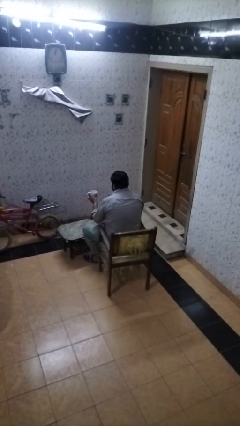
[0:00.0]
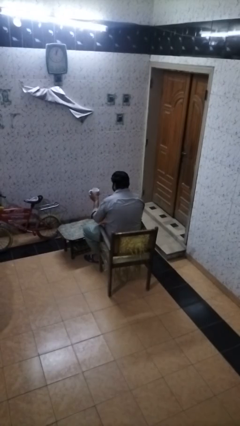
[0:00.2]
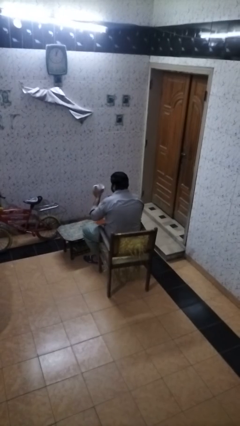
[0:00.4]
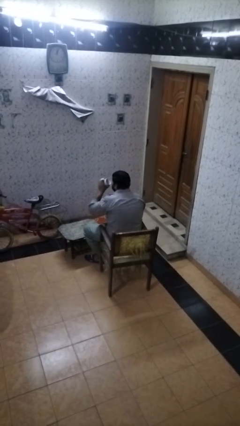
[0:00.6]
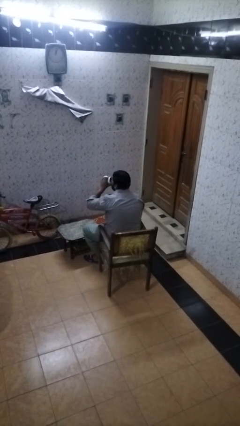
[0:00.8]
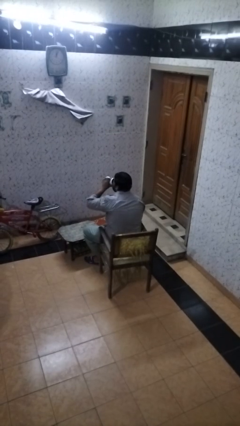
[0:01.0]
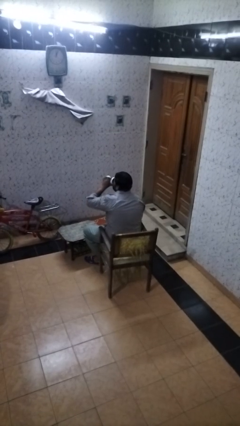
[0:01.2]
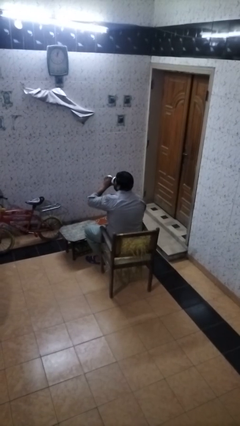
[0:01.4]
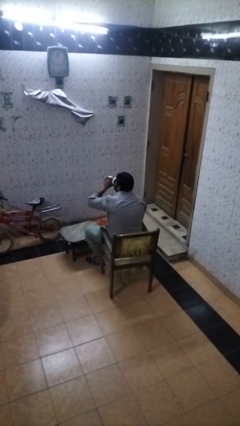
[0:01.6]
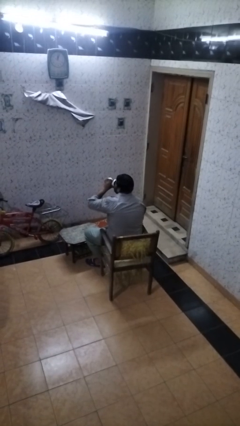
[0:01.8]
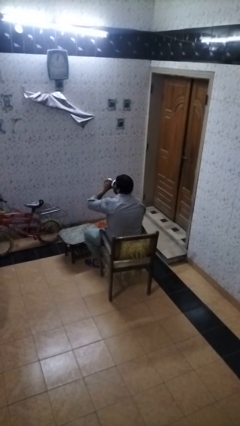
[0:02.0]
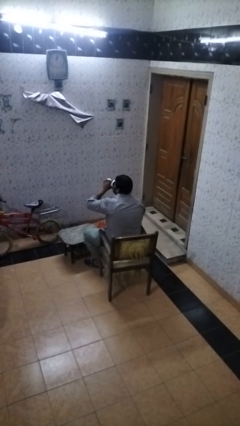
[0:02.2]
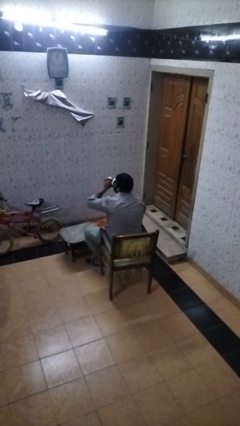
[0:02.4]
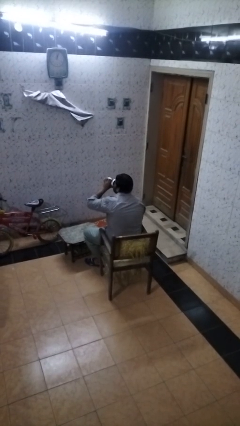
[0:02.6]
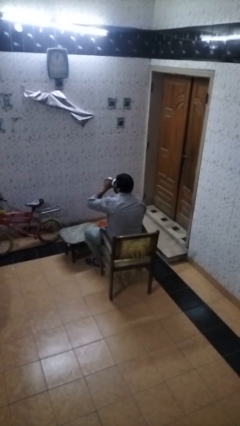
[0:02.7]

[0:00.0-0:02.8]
person drinks from mug

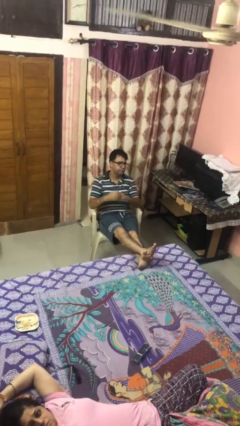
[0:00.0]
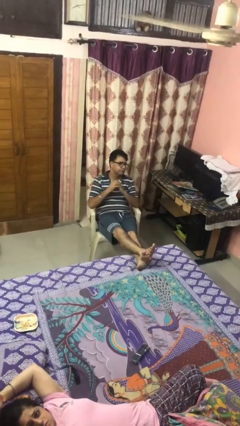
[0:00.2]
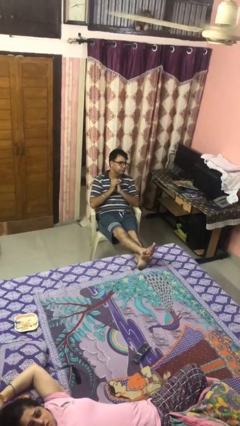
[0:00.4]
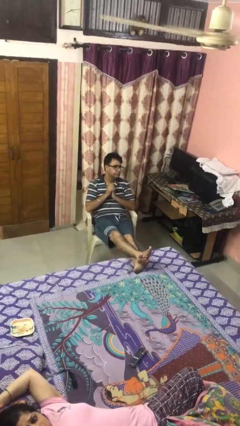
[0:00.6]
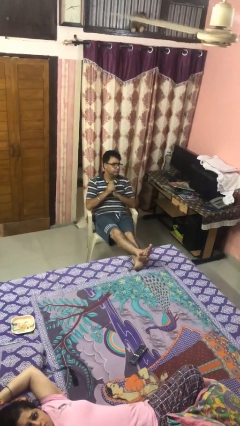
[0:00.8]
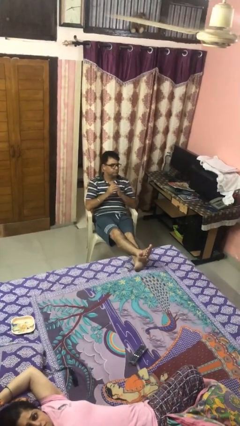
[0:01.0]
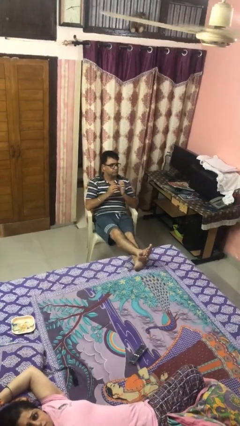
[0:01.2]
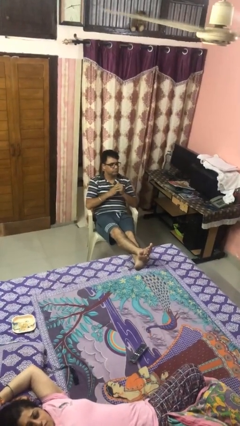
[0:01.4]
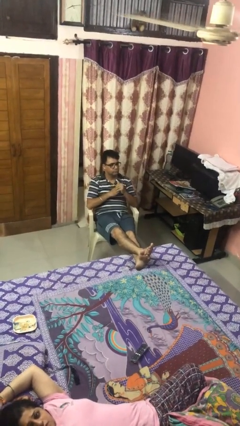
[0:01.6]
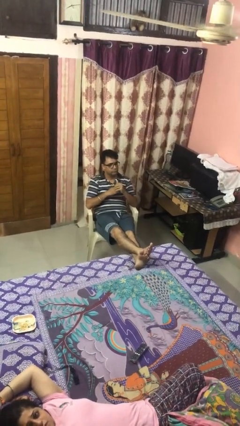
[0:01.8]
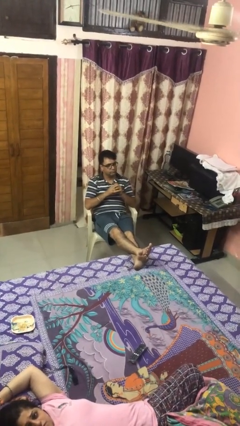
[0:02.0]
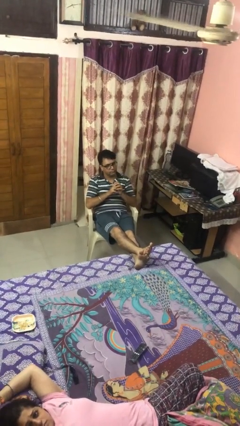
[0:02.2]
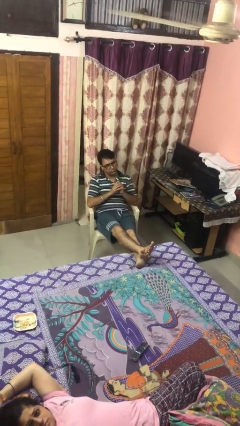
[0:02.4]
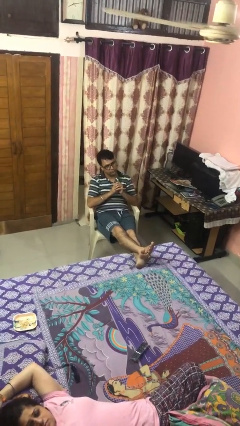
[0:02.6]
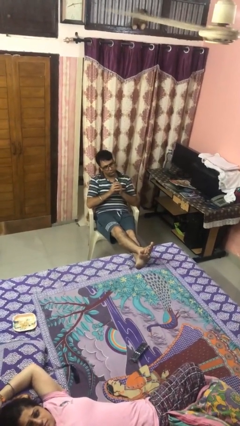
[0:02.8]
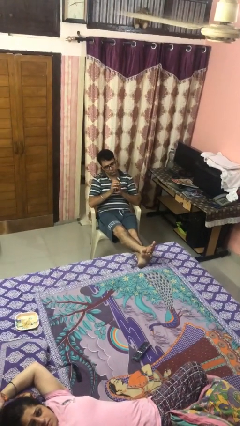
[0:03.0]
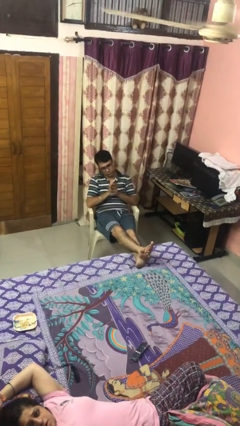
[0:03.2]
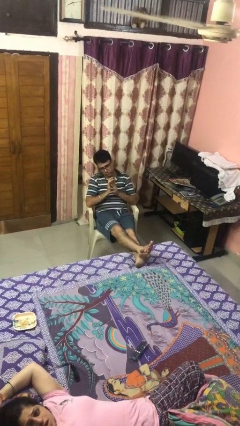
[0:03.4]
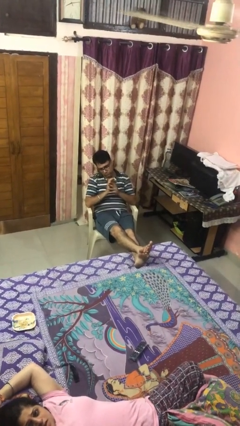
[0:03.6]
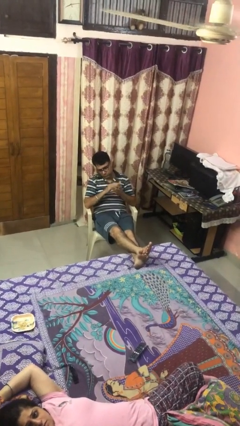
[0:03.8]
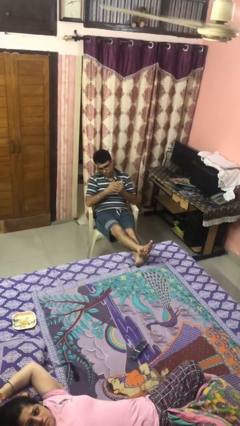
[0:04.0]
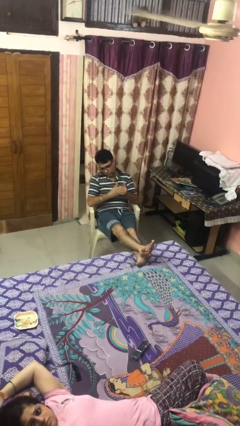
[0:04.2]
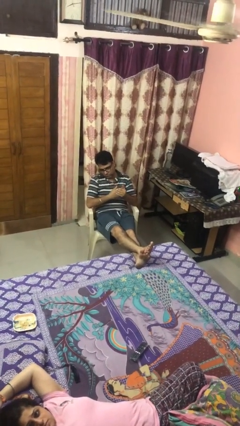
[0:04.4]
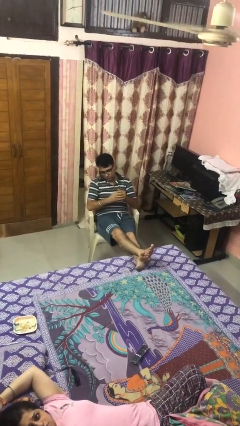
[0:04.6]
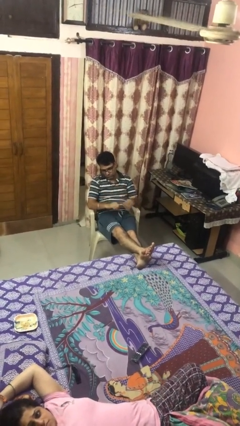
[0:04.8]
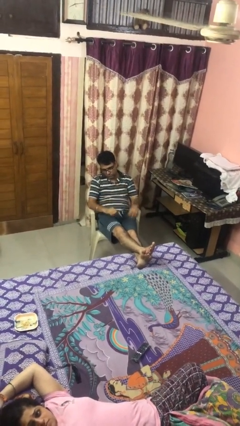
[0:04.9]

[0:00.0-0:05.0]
person cracks knuckles

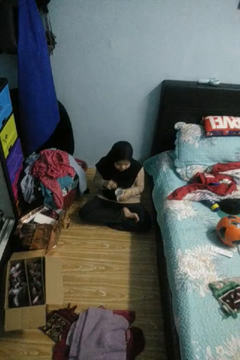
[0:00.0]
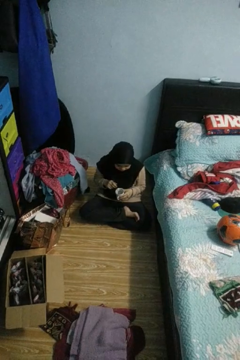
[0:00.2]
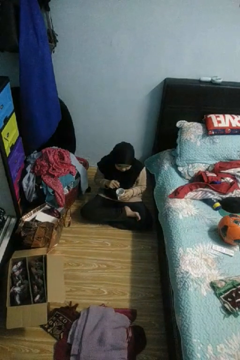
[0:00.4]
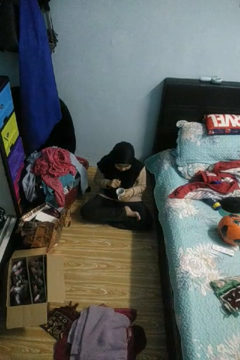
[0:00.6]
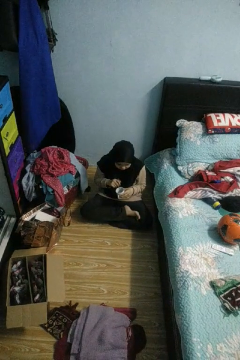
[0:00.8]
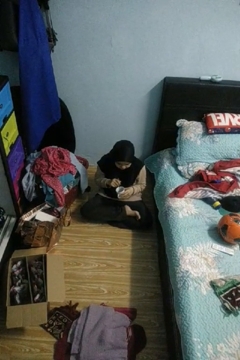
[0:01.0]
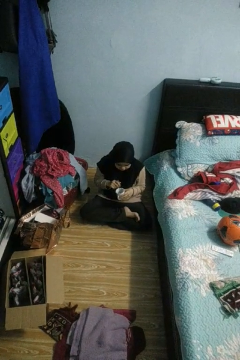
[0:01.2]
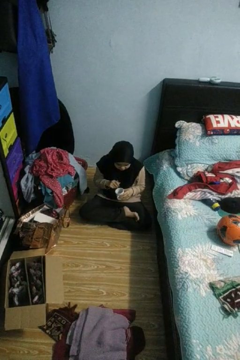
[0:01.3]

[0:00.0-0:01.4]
person stirs mug

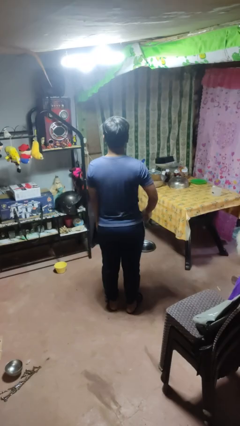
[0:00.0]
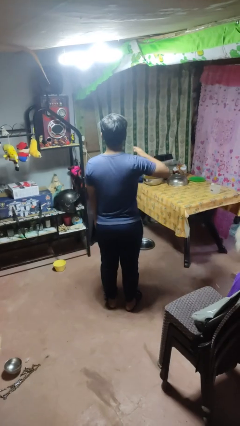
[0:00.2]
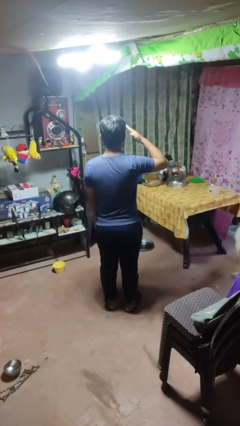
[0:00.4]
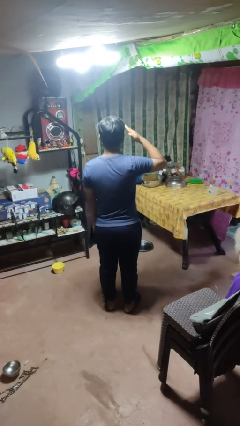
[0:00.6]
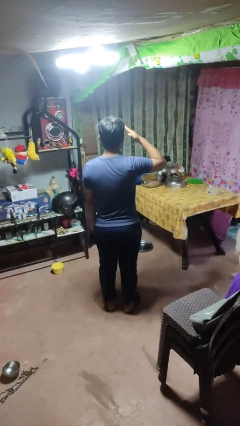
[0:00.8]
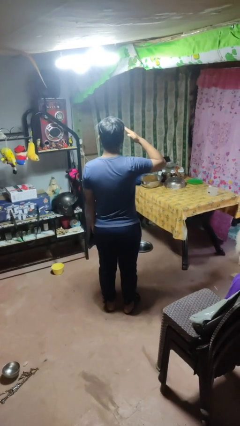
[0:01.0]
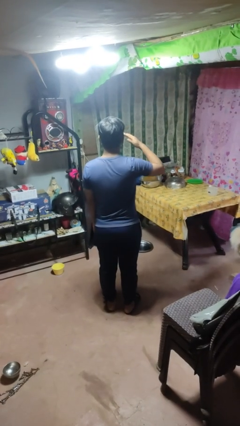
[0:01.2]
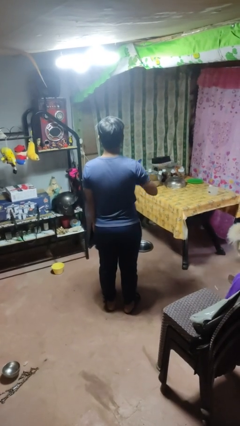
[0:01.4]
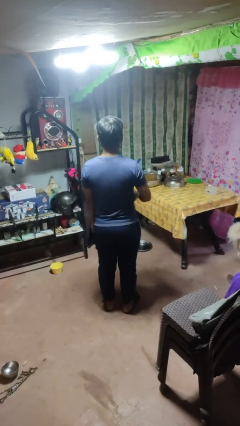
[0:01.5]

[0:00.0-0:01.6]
person salutes

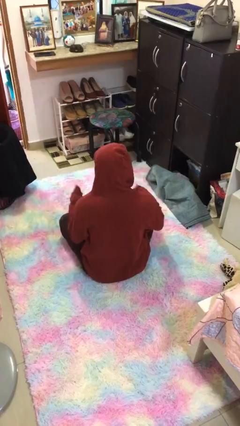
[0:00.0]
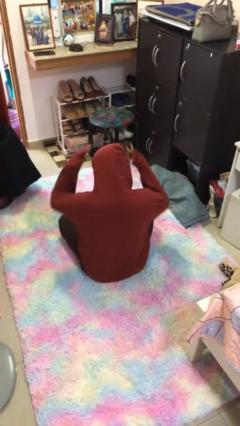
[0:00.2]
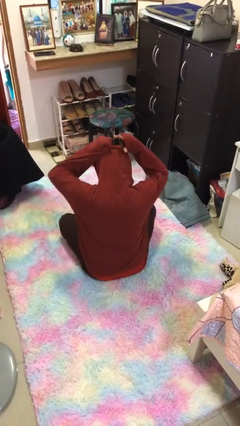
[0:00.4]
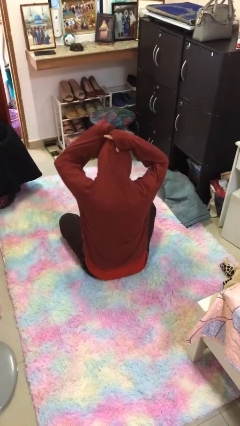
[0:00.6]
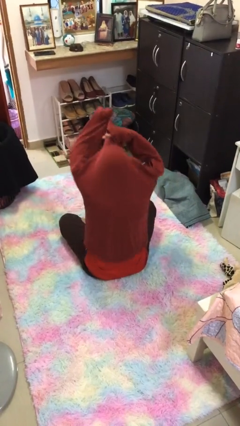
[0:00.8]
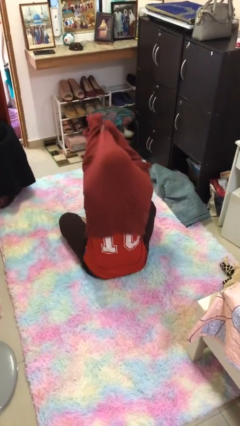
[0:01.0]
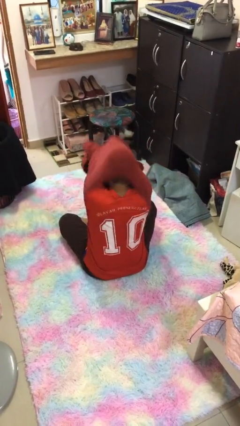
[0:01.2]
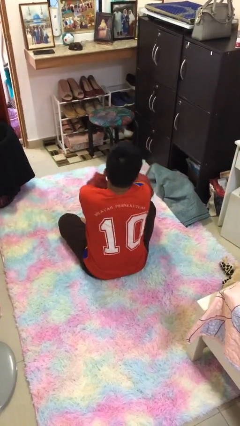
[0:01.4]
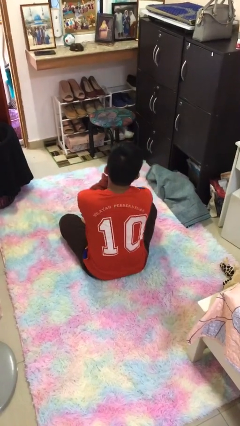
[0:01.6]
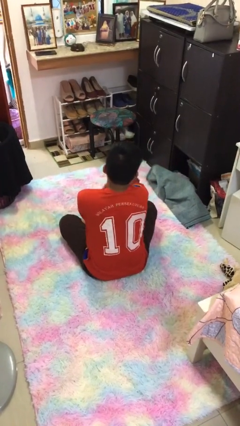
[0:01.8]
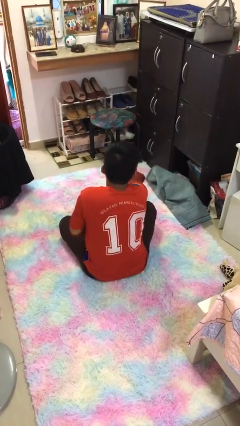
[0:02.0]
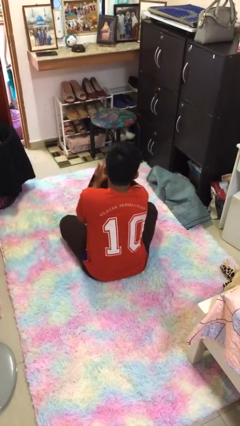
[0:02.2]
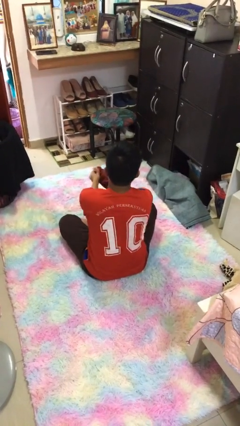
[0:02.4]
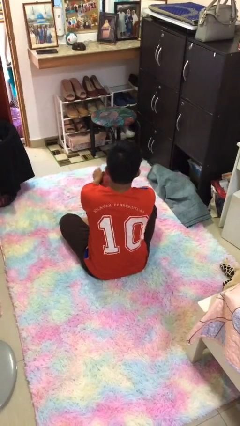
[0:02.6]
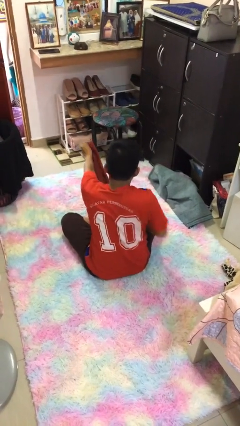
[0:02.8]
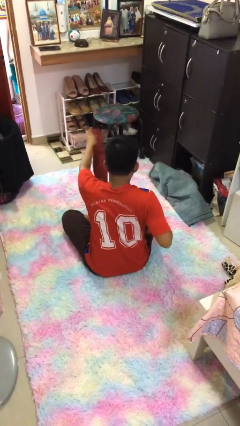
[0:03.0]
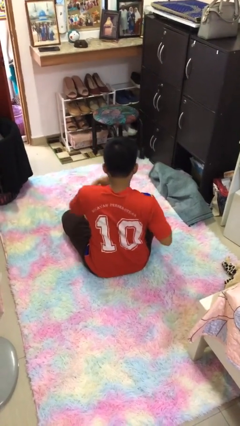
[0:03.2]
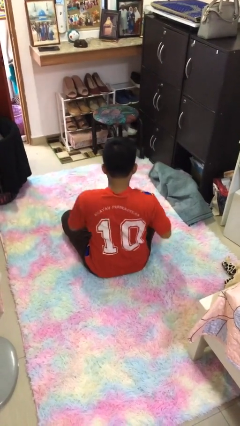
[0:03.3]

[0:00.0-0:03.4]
person takes off hoodie

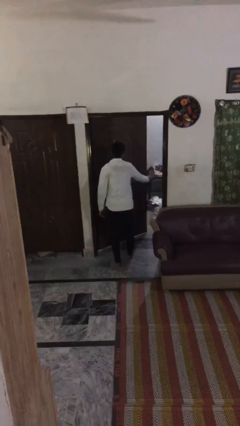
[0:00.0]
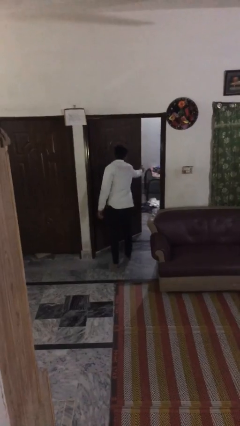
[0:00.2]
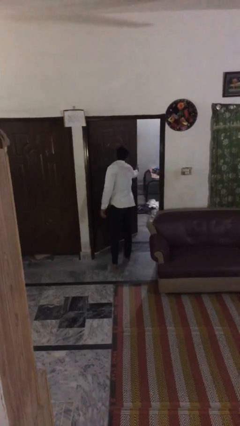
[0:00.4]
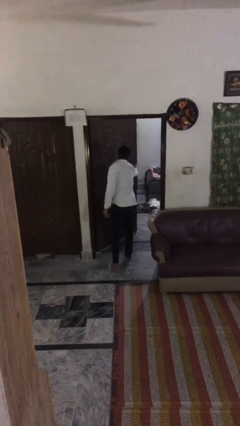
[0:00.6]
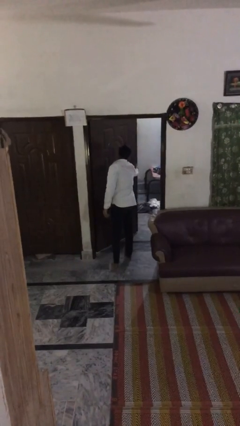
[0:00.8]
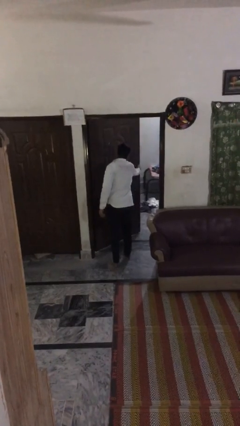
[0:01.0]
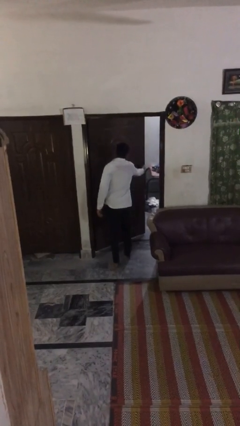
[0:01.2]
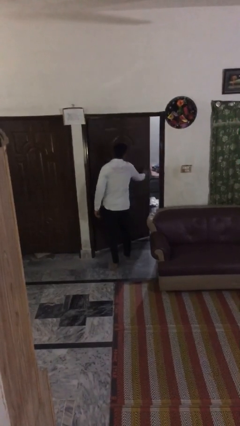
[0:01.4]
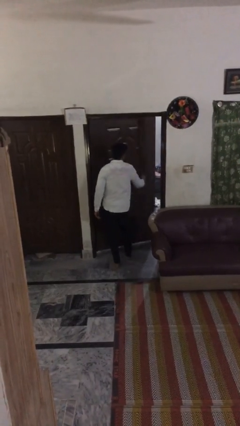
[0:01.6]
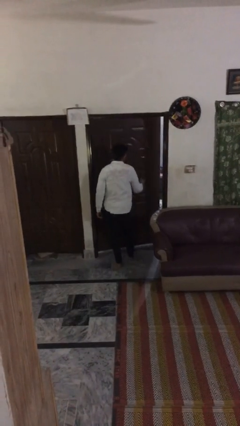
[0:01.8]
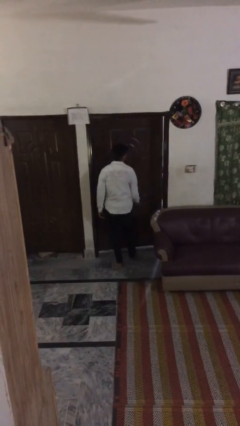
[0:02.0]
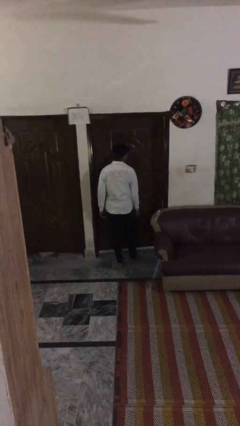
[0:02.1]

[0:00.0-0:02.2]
person closes facility door

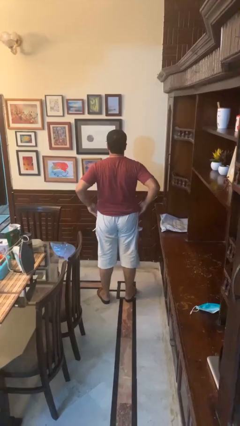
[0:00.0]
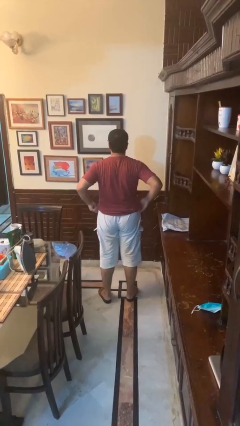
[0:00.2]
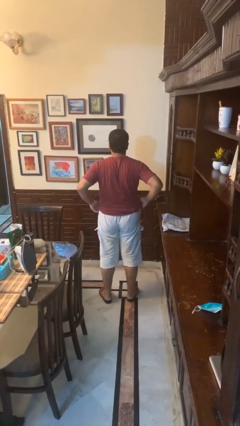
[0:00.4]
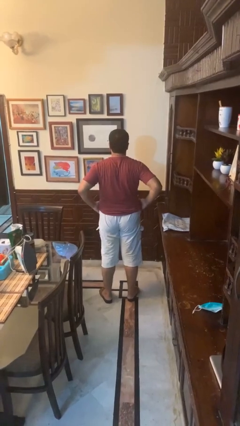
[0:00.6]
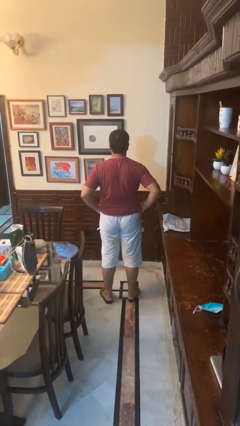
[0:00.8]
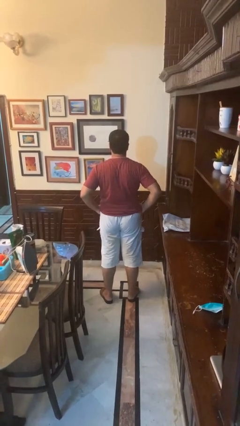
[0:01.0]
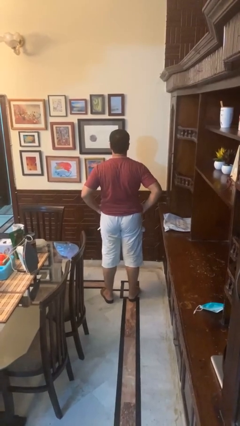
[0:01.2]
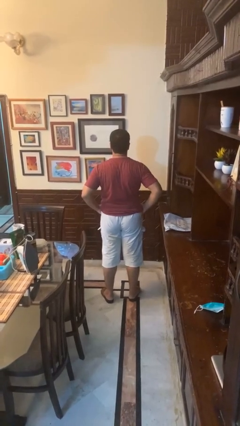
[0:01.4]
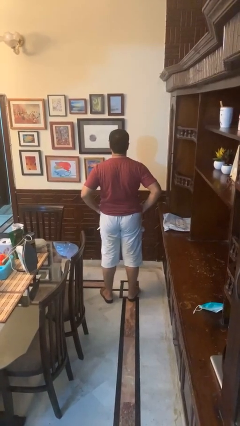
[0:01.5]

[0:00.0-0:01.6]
person puts hands in back pockets
